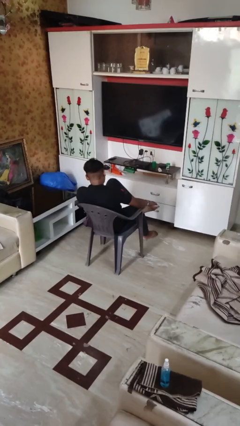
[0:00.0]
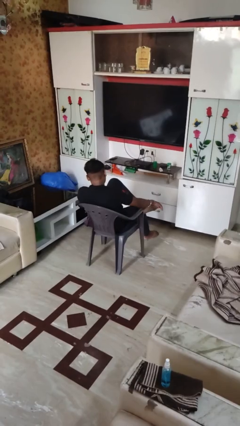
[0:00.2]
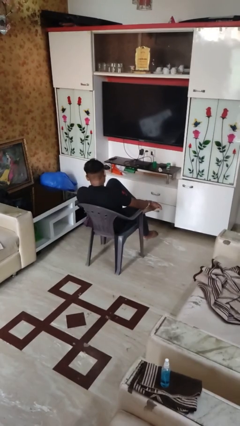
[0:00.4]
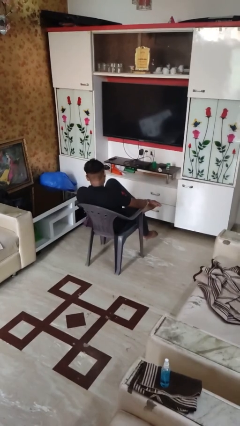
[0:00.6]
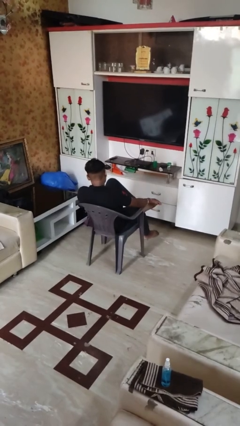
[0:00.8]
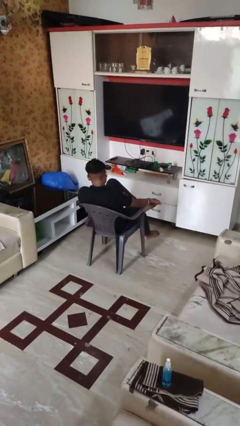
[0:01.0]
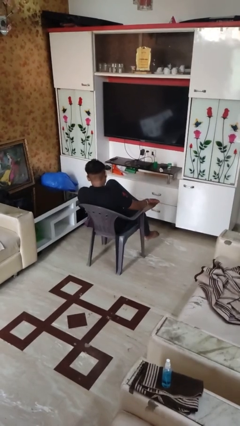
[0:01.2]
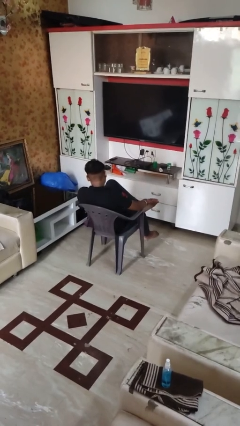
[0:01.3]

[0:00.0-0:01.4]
person swats bug

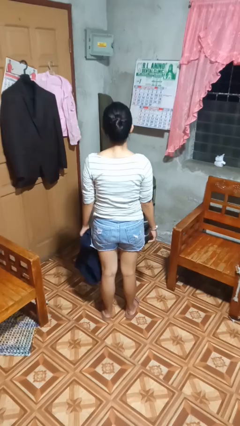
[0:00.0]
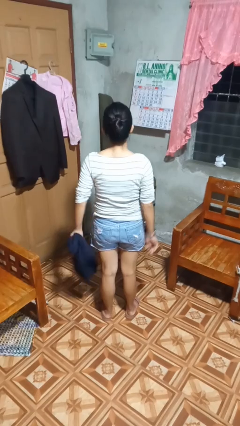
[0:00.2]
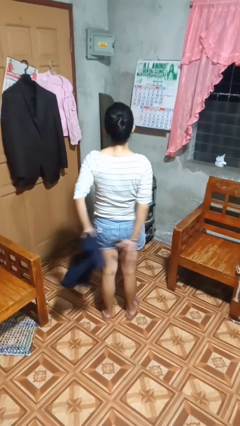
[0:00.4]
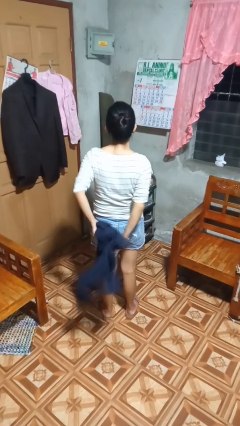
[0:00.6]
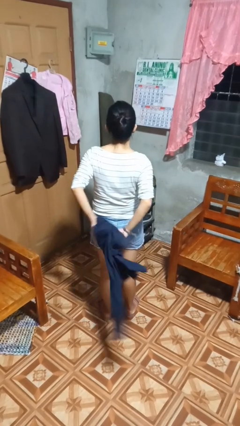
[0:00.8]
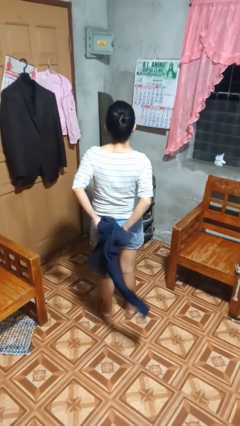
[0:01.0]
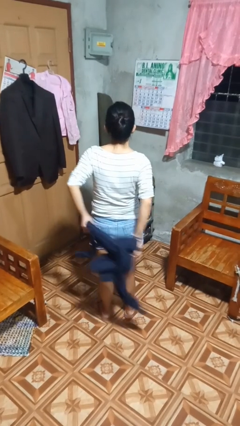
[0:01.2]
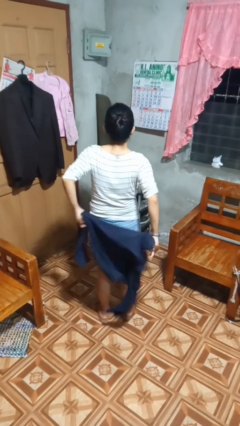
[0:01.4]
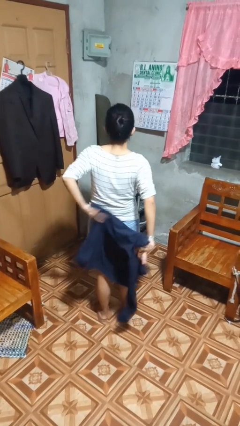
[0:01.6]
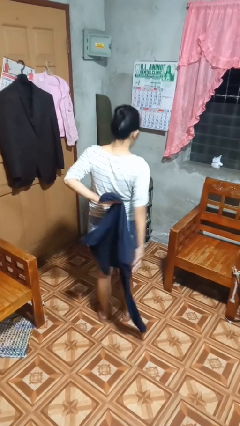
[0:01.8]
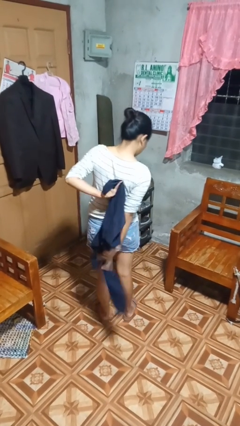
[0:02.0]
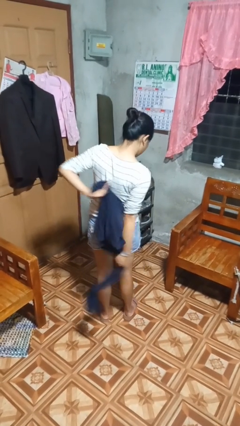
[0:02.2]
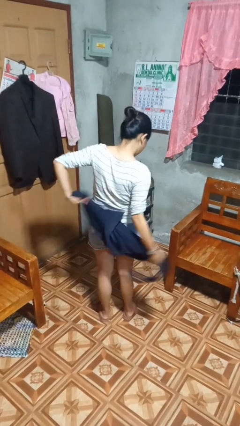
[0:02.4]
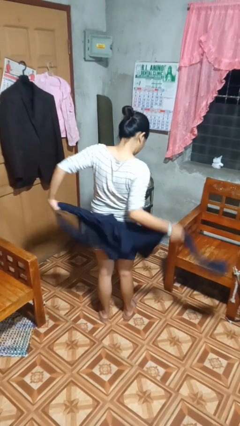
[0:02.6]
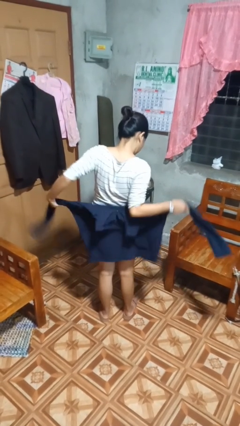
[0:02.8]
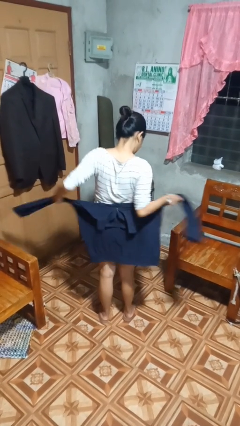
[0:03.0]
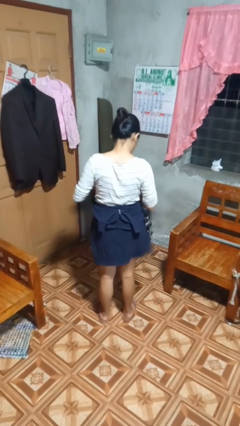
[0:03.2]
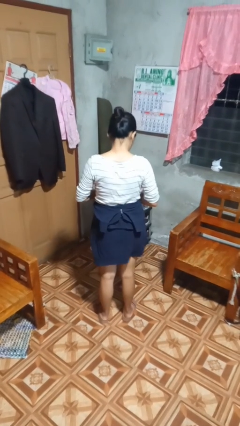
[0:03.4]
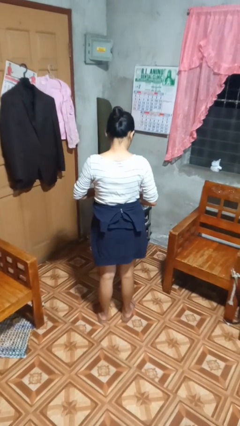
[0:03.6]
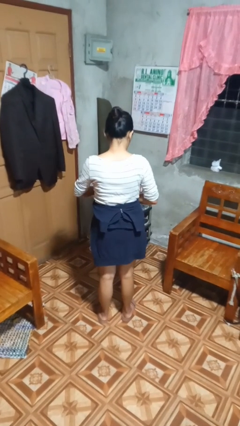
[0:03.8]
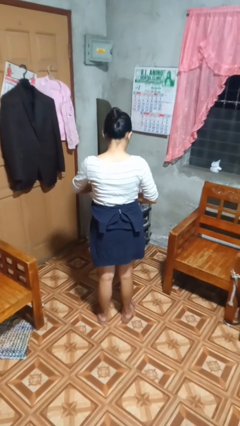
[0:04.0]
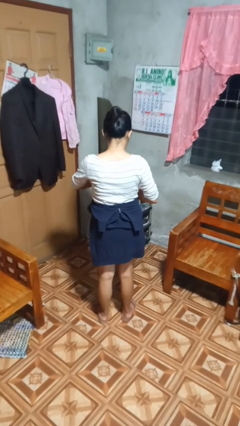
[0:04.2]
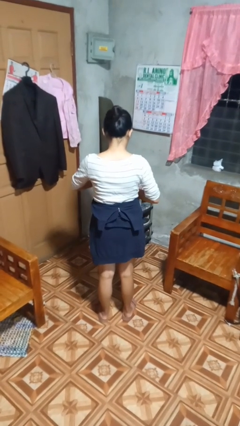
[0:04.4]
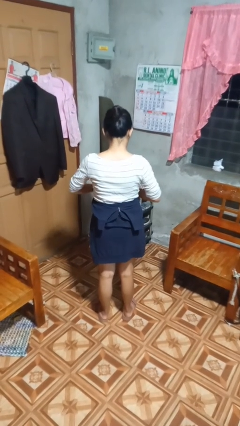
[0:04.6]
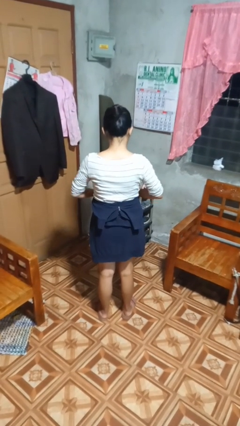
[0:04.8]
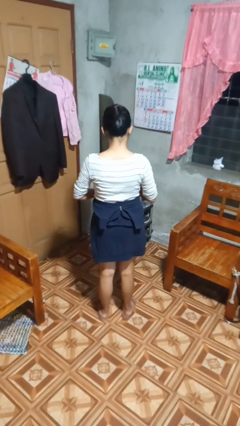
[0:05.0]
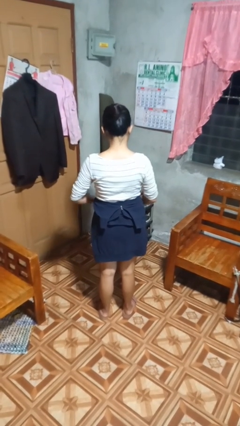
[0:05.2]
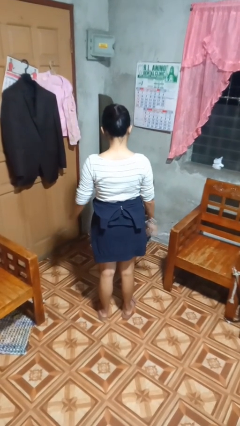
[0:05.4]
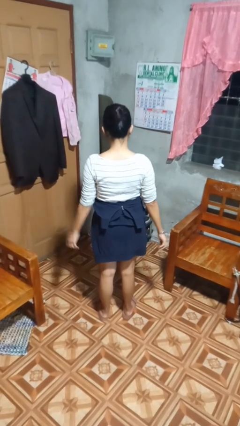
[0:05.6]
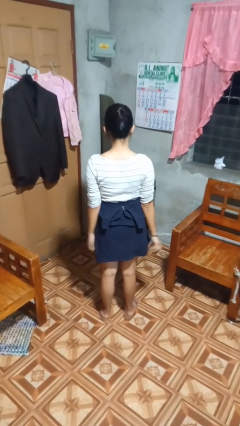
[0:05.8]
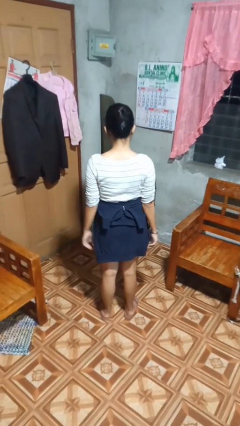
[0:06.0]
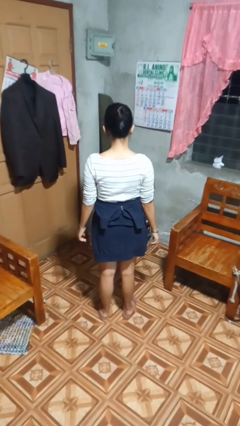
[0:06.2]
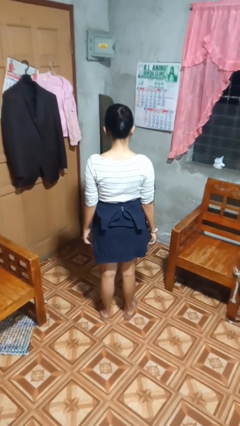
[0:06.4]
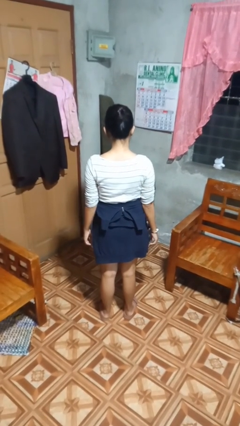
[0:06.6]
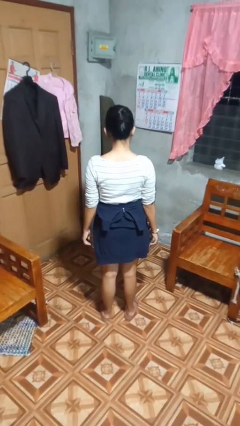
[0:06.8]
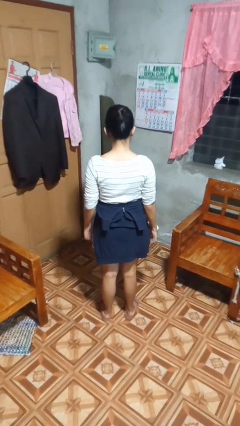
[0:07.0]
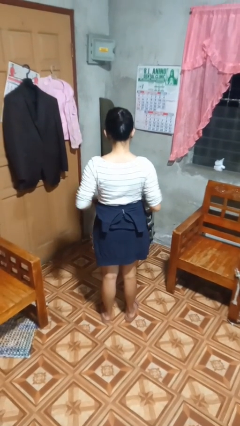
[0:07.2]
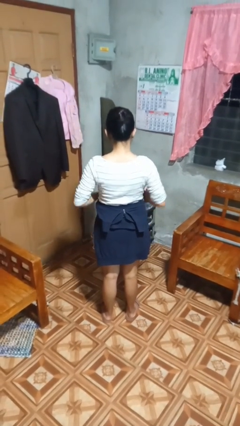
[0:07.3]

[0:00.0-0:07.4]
person ties jacket around waist

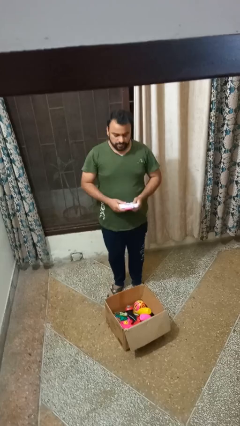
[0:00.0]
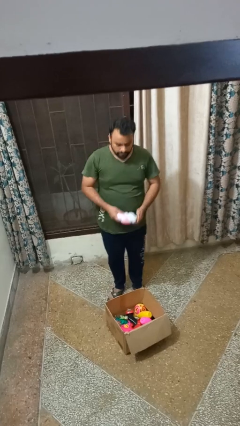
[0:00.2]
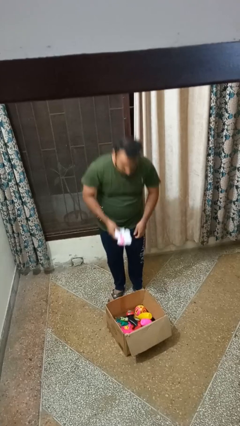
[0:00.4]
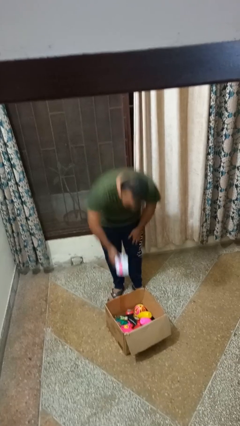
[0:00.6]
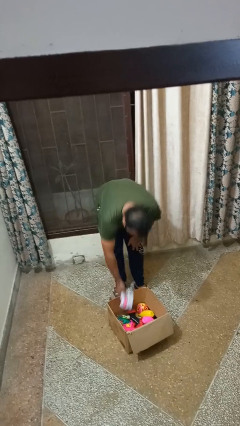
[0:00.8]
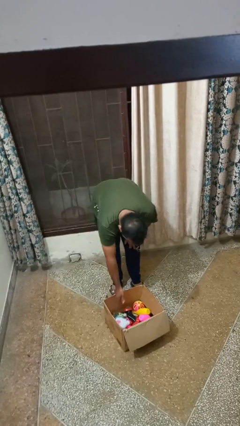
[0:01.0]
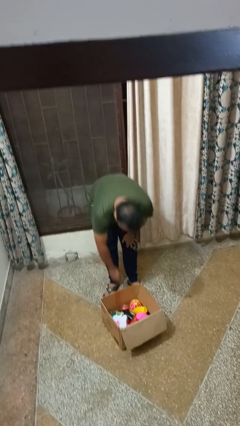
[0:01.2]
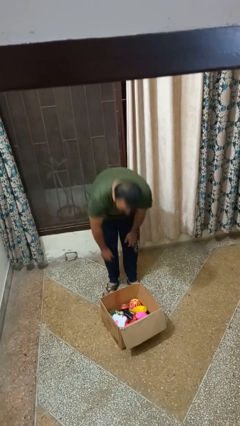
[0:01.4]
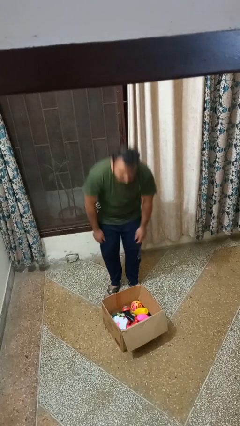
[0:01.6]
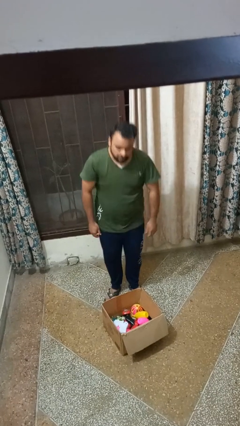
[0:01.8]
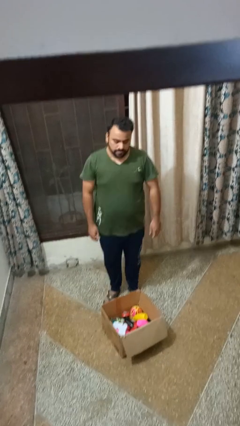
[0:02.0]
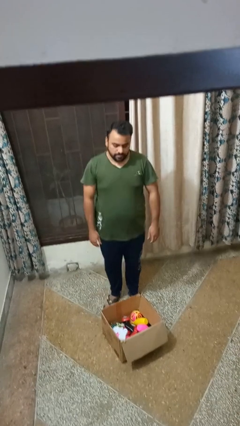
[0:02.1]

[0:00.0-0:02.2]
person puts object into box

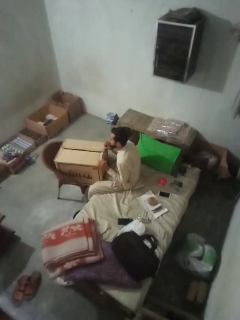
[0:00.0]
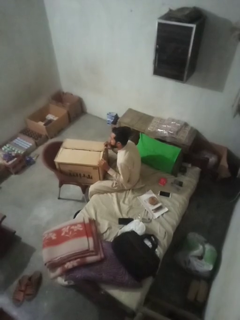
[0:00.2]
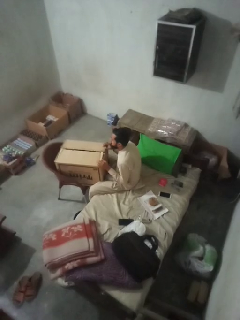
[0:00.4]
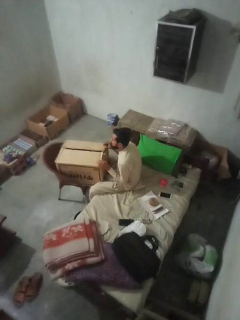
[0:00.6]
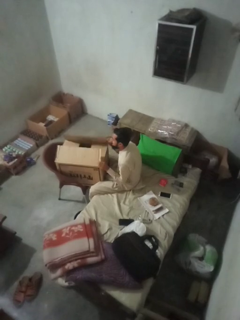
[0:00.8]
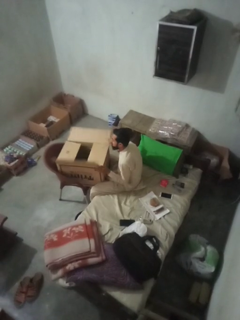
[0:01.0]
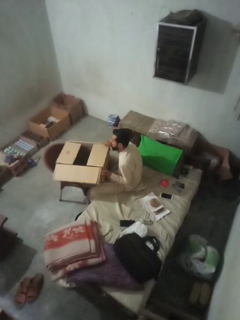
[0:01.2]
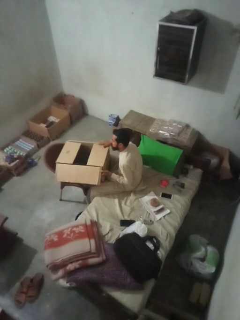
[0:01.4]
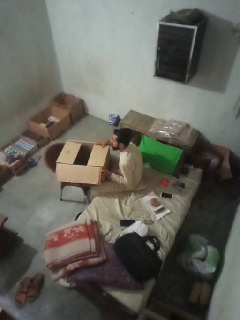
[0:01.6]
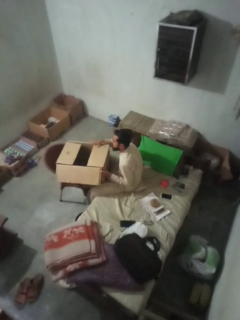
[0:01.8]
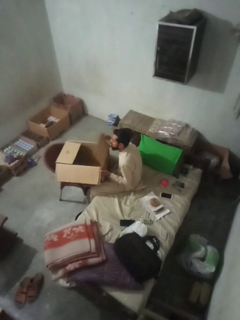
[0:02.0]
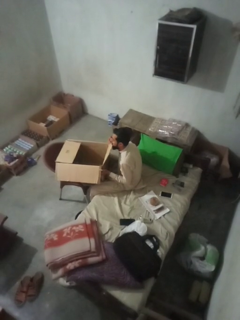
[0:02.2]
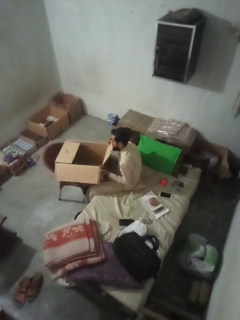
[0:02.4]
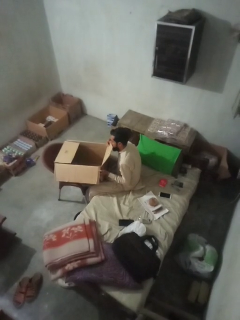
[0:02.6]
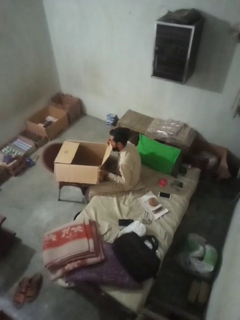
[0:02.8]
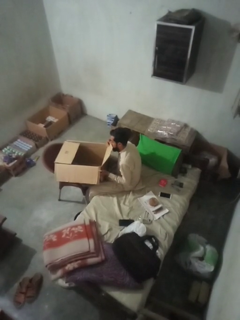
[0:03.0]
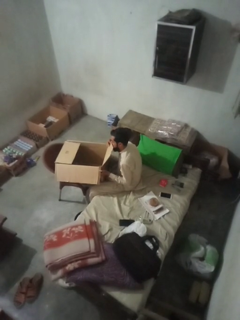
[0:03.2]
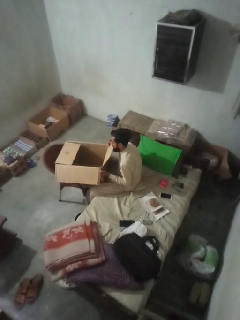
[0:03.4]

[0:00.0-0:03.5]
person opens box

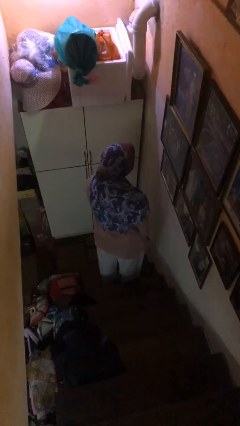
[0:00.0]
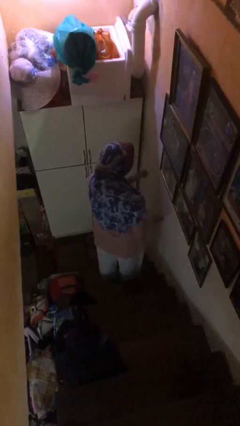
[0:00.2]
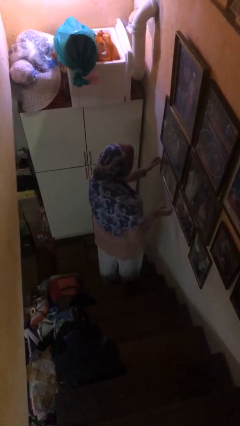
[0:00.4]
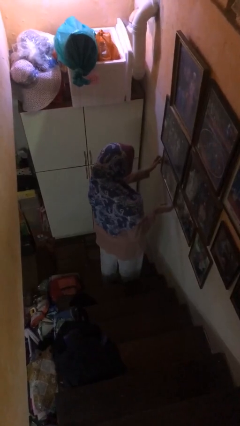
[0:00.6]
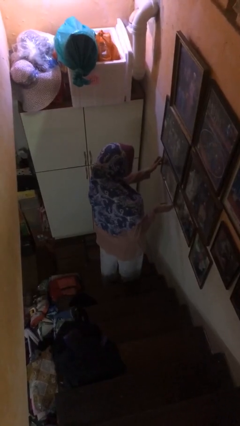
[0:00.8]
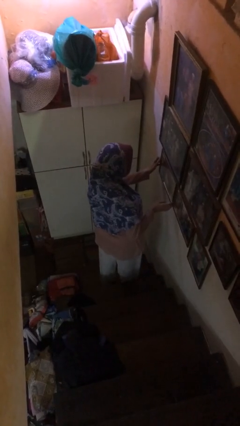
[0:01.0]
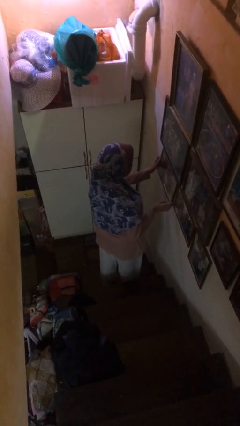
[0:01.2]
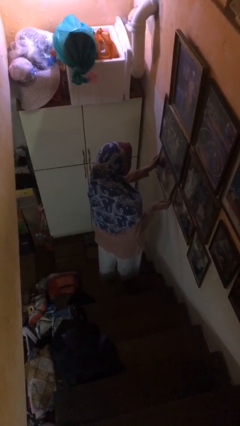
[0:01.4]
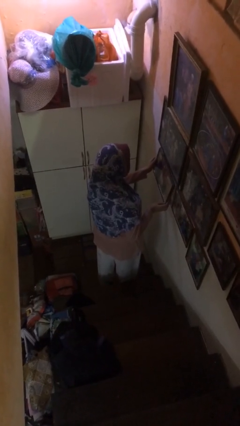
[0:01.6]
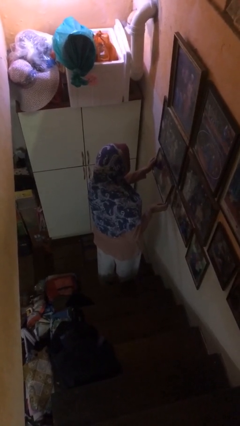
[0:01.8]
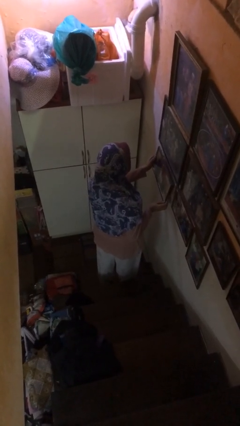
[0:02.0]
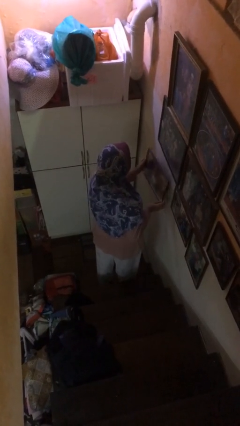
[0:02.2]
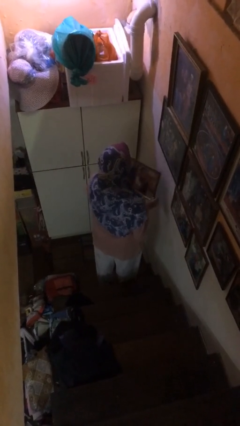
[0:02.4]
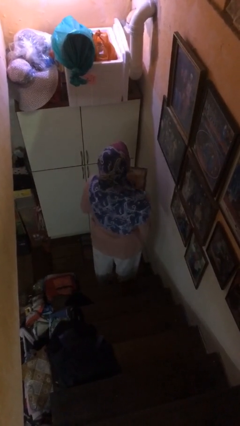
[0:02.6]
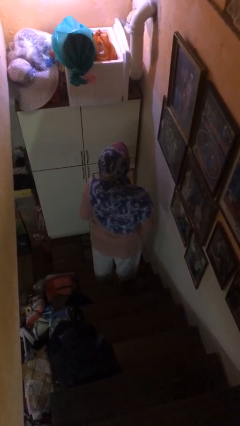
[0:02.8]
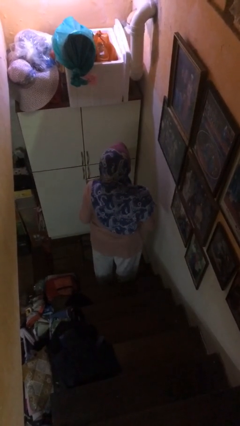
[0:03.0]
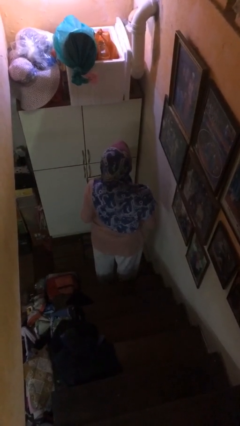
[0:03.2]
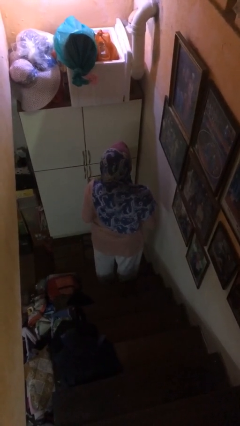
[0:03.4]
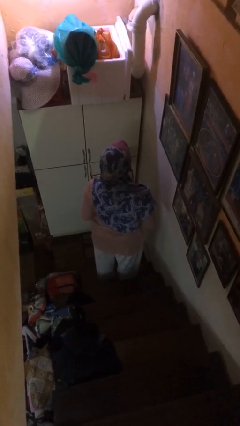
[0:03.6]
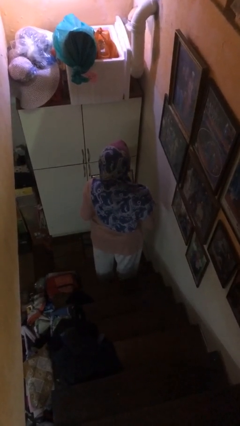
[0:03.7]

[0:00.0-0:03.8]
person puts up picture frame
